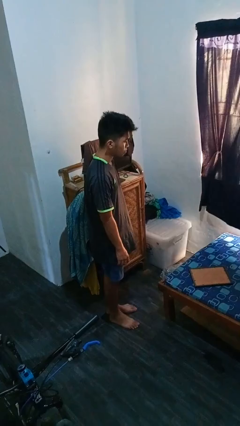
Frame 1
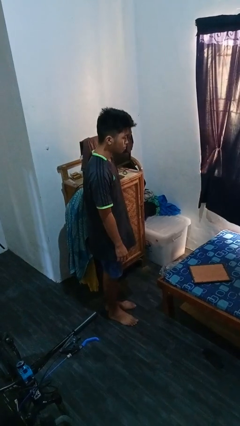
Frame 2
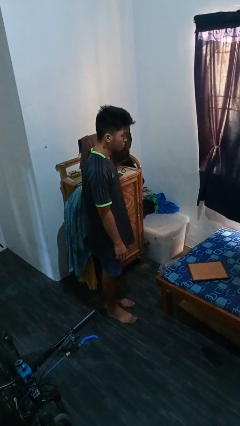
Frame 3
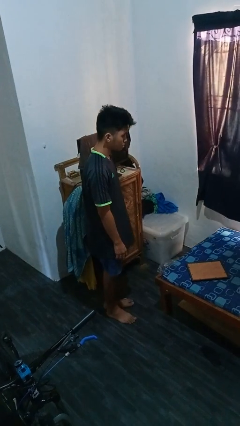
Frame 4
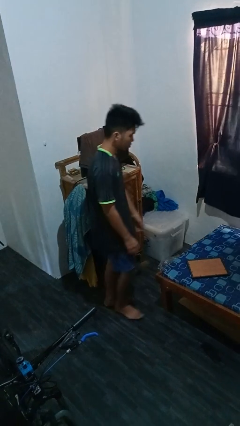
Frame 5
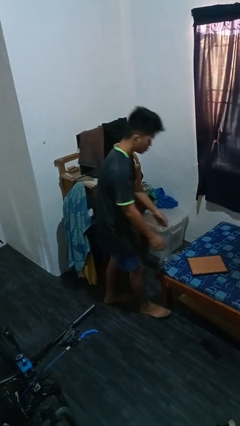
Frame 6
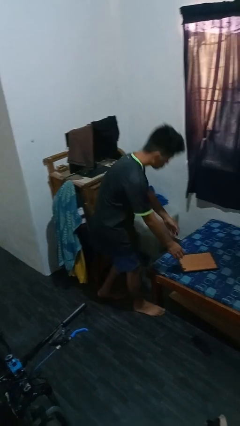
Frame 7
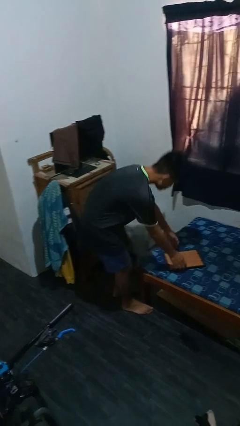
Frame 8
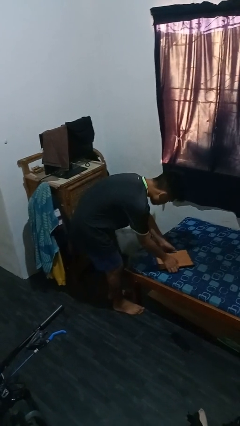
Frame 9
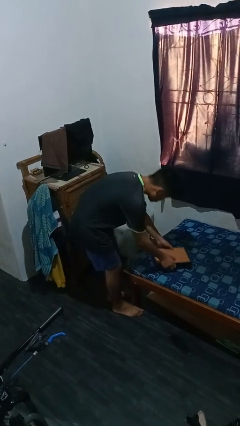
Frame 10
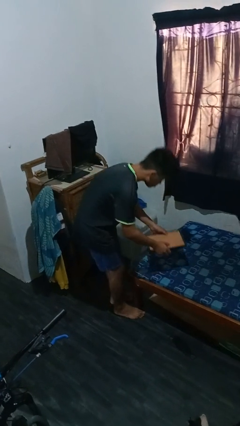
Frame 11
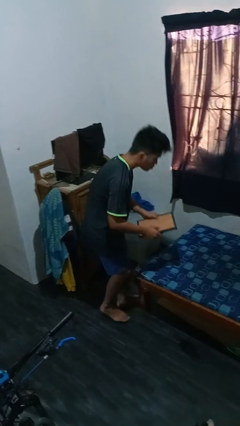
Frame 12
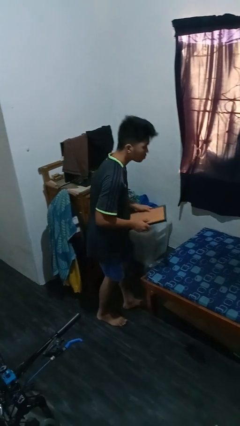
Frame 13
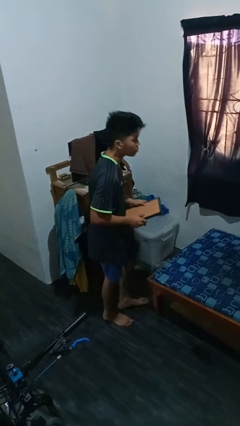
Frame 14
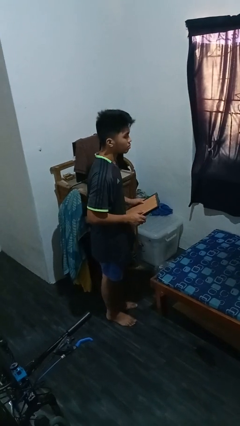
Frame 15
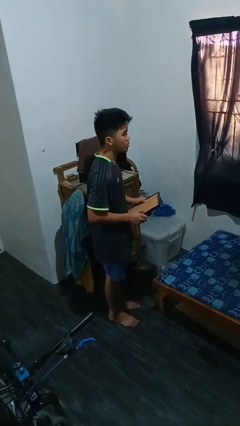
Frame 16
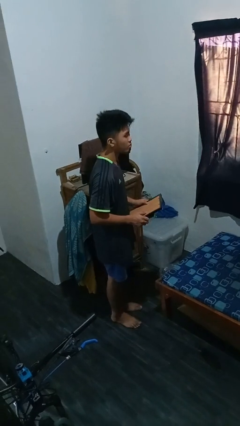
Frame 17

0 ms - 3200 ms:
person picks up object from bed

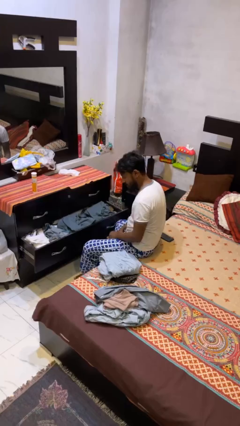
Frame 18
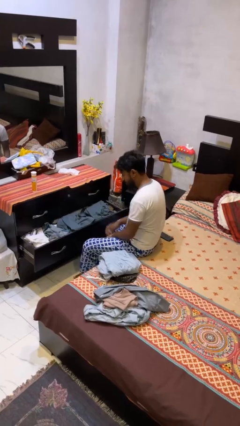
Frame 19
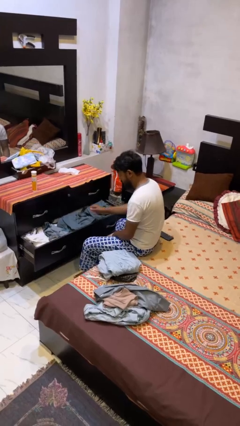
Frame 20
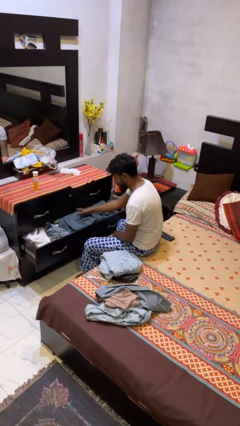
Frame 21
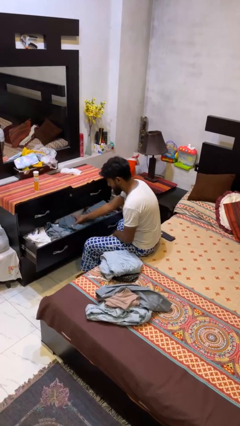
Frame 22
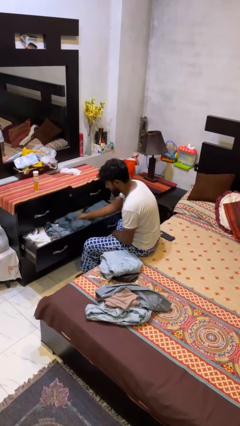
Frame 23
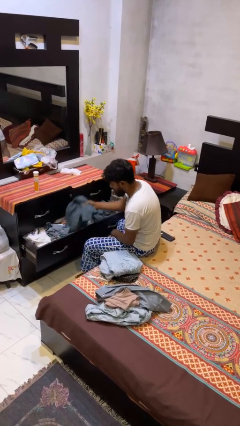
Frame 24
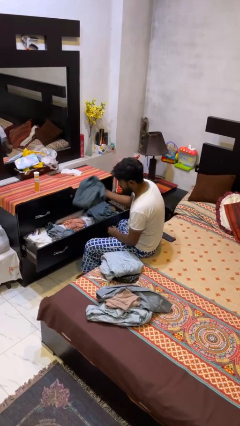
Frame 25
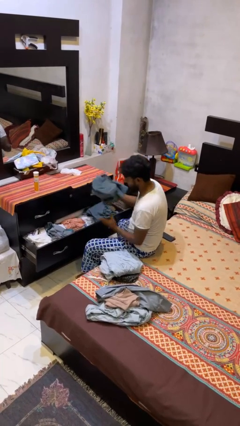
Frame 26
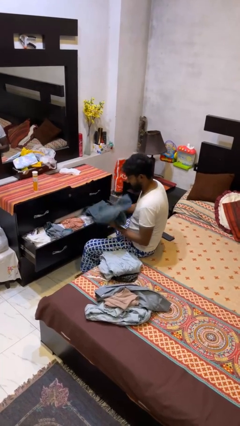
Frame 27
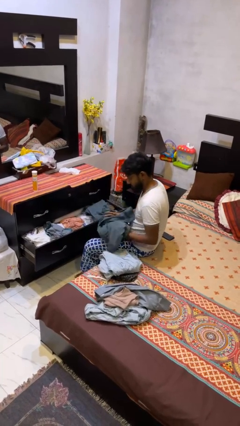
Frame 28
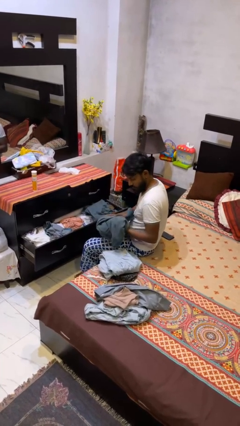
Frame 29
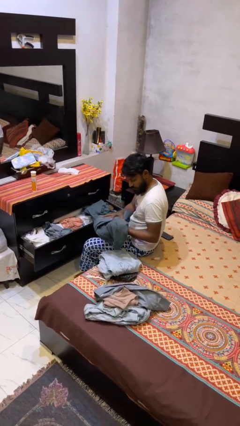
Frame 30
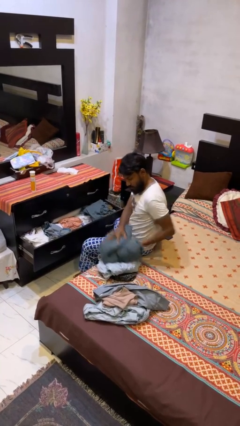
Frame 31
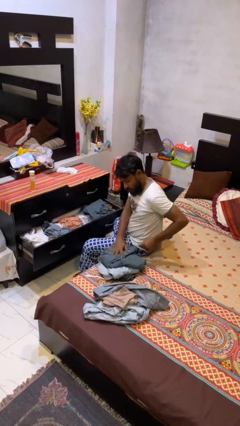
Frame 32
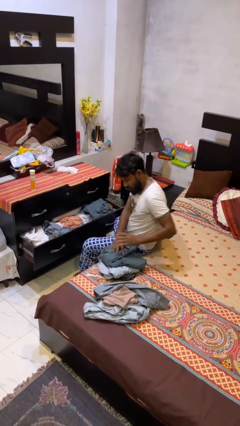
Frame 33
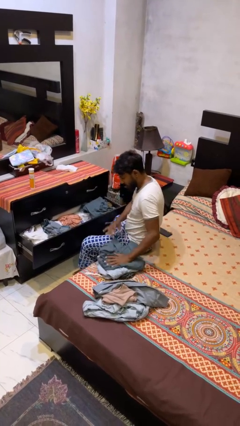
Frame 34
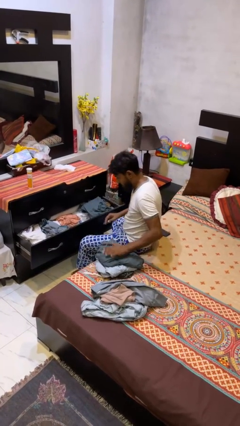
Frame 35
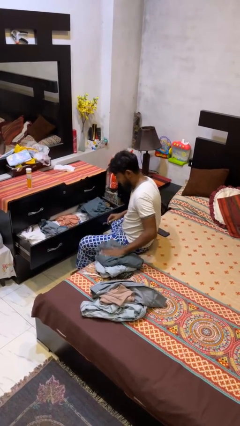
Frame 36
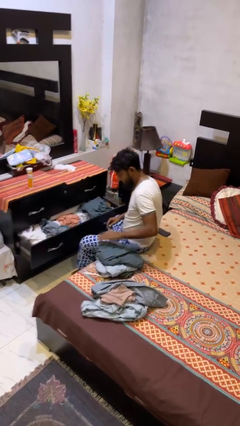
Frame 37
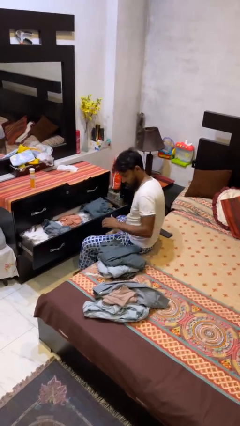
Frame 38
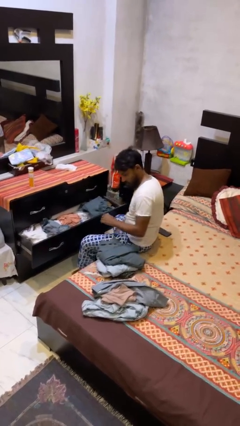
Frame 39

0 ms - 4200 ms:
person takes clothes from dresser

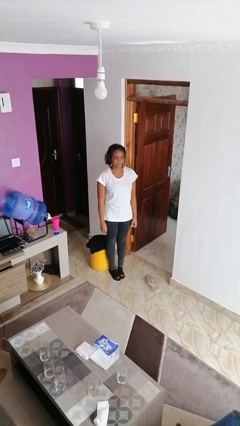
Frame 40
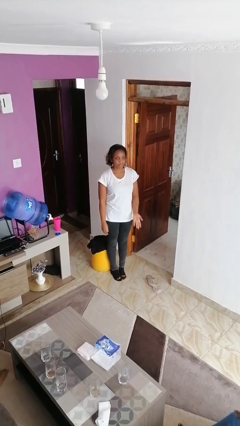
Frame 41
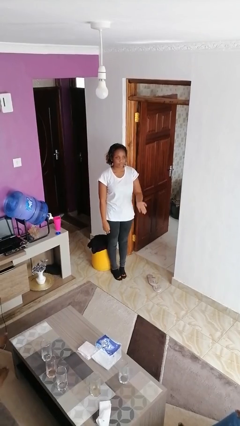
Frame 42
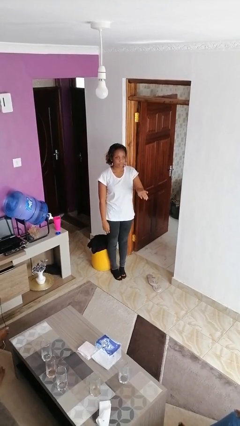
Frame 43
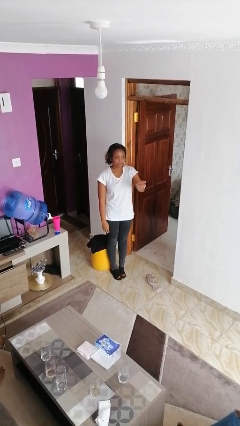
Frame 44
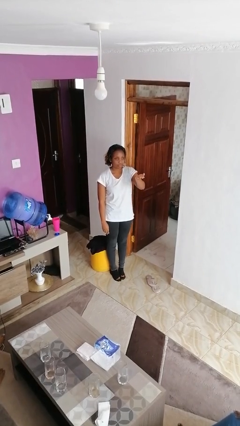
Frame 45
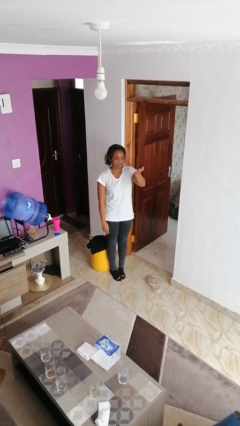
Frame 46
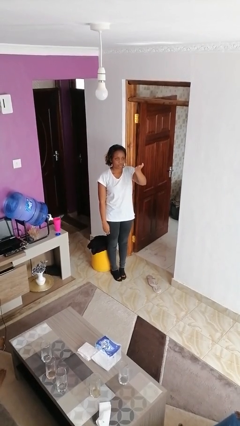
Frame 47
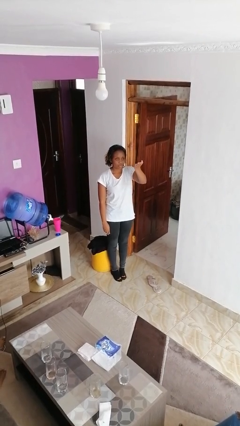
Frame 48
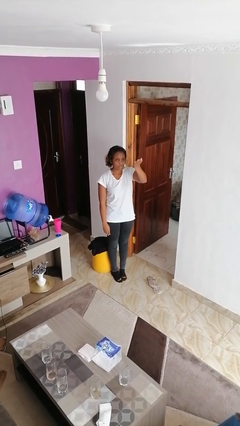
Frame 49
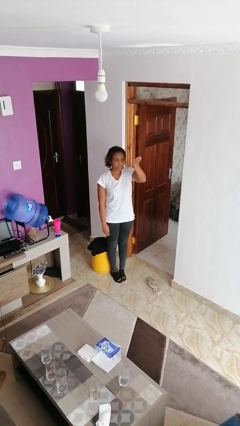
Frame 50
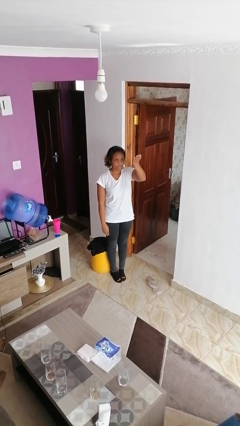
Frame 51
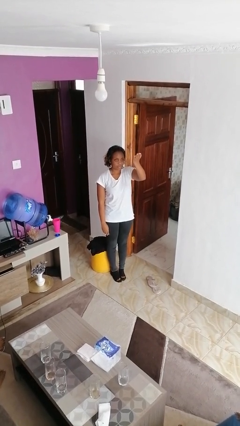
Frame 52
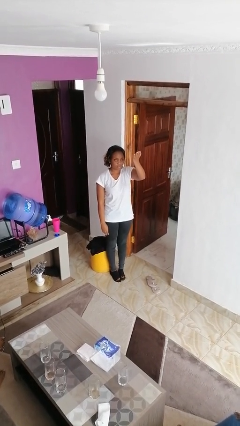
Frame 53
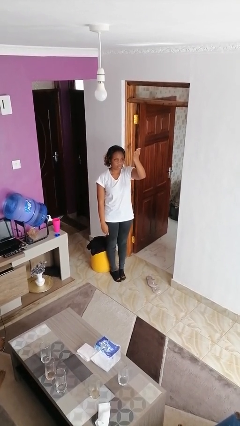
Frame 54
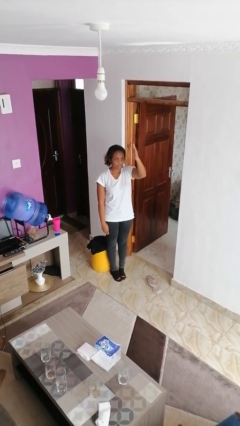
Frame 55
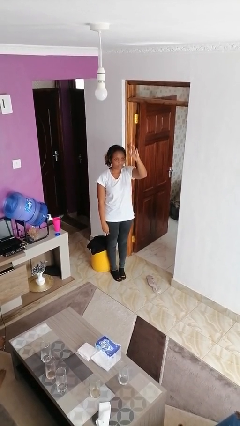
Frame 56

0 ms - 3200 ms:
person gestures swipe up

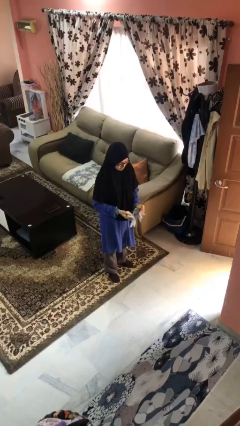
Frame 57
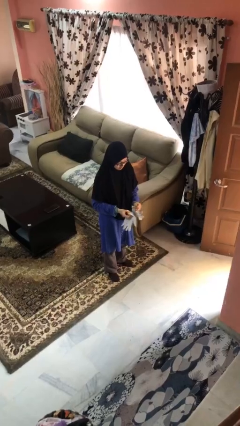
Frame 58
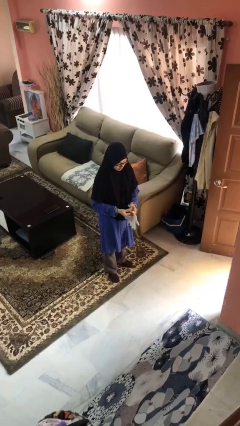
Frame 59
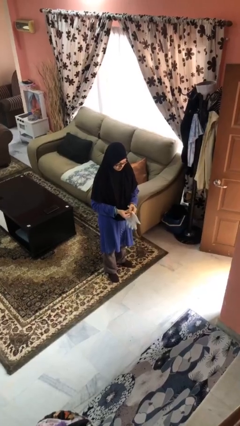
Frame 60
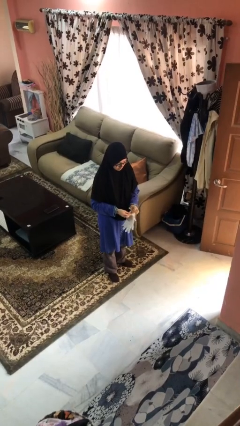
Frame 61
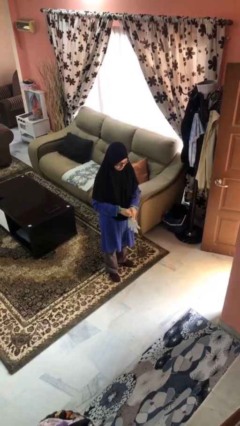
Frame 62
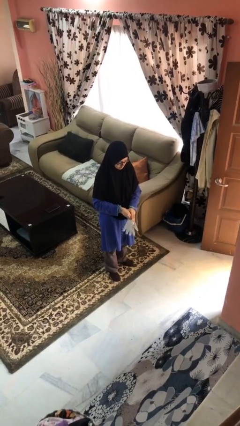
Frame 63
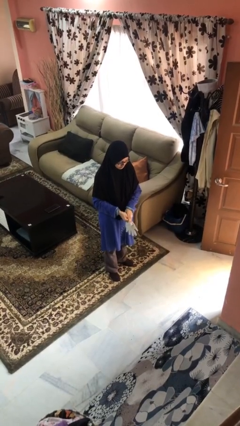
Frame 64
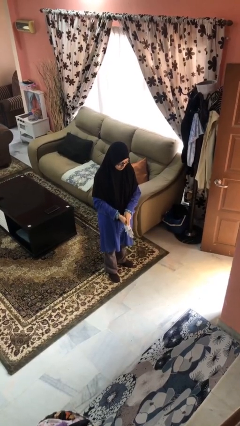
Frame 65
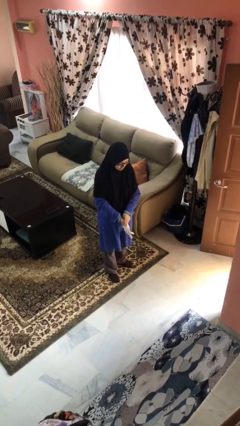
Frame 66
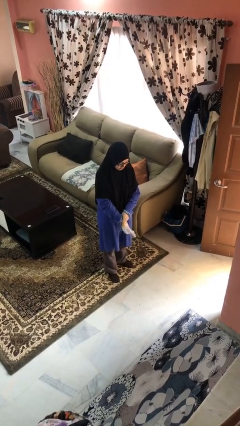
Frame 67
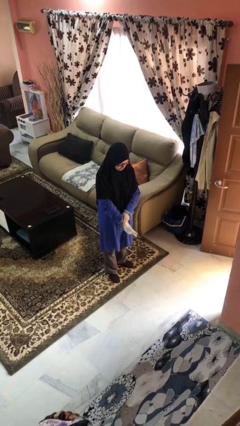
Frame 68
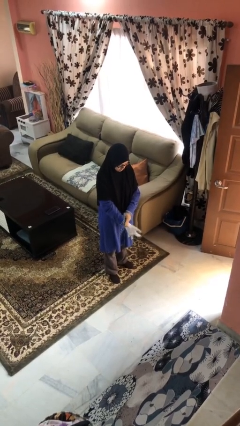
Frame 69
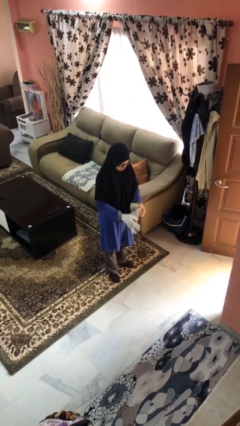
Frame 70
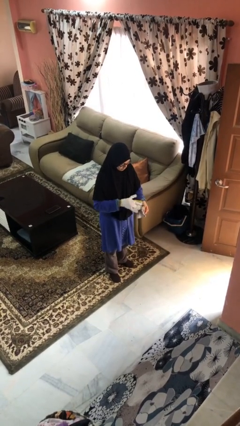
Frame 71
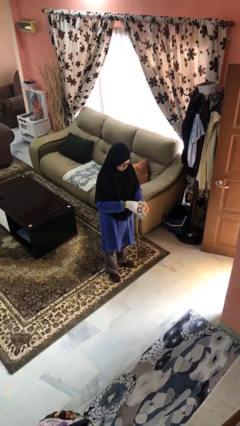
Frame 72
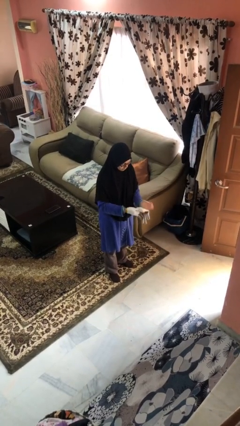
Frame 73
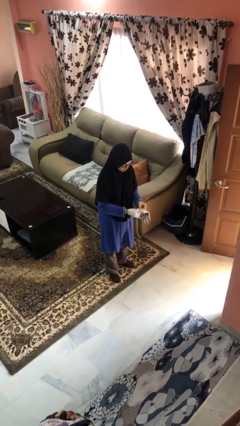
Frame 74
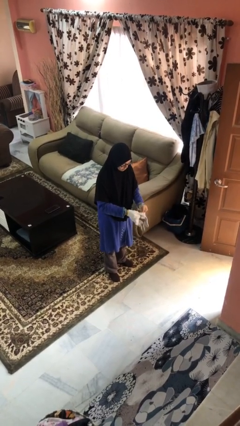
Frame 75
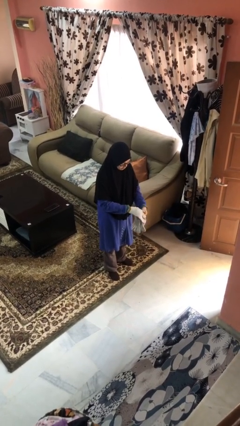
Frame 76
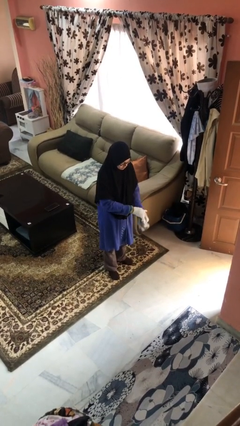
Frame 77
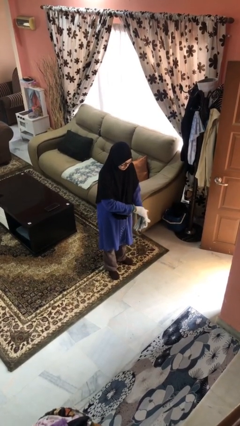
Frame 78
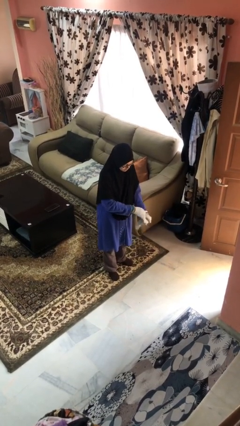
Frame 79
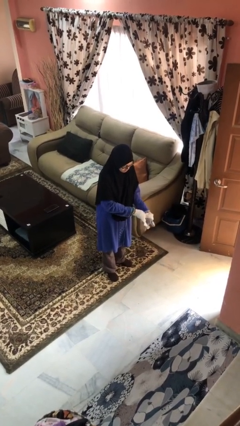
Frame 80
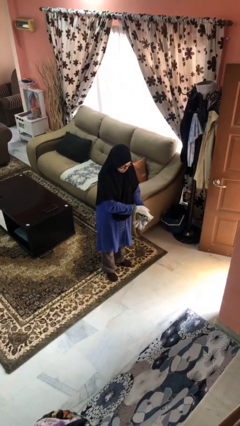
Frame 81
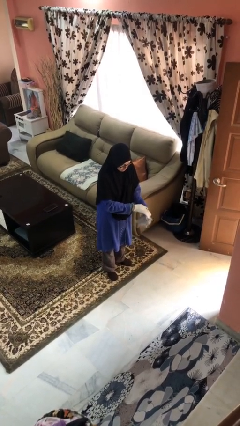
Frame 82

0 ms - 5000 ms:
person puts on gloves

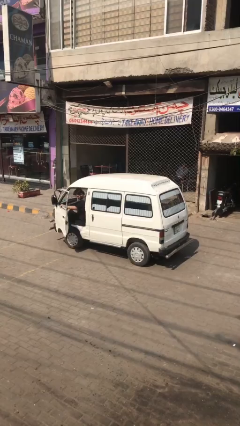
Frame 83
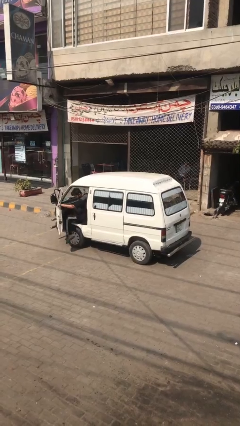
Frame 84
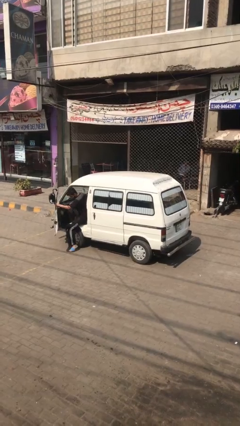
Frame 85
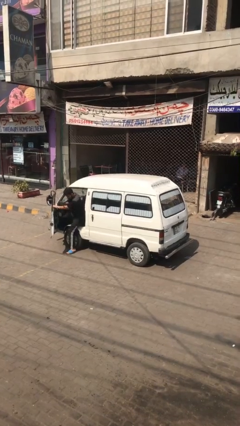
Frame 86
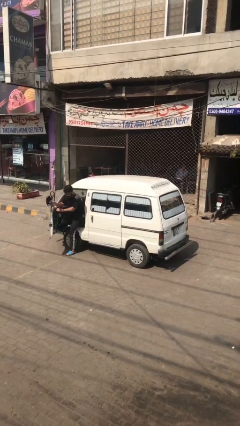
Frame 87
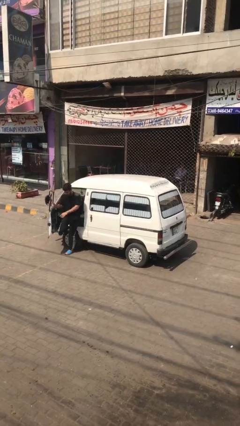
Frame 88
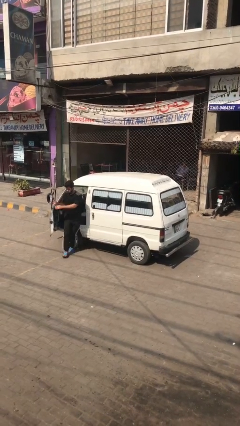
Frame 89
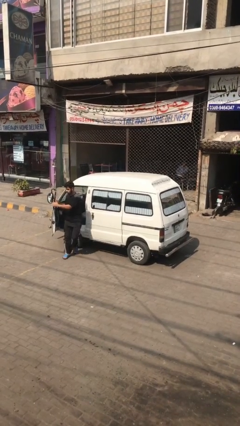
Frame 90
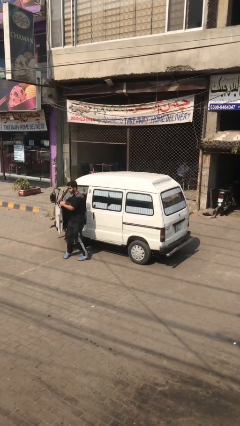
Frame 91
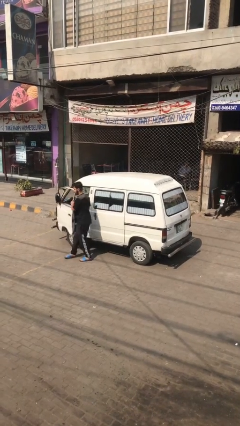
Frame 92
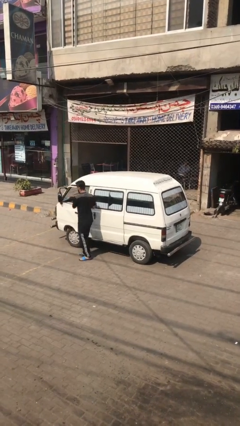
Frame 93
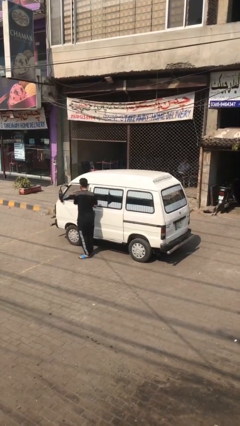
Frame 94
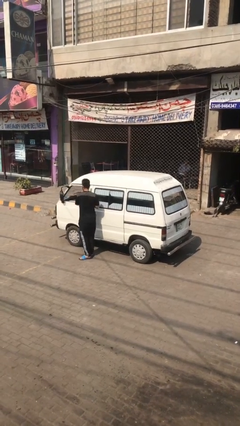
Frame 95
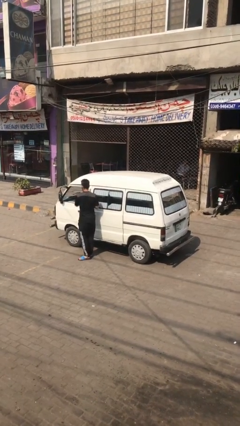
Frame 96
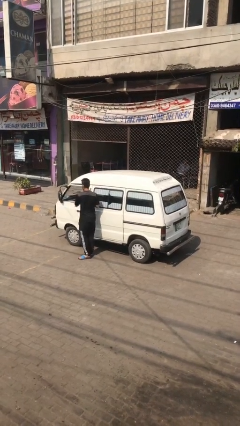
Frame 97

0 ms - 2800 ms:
car drops off person
